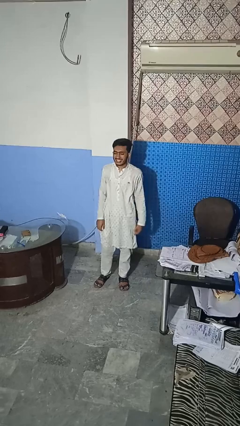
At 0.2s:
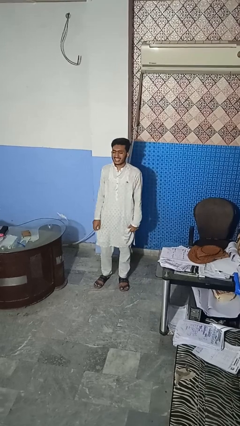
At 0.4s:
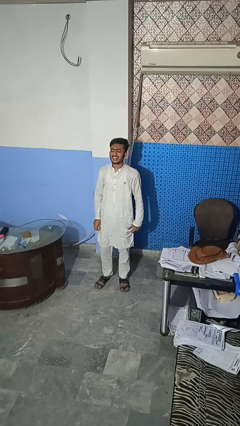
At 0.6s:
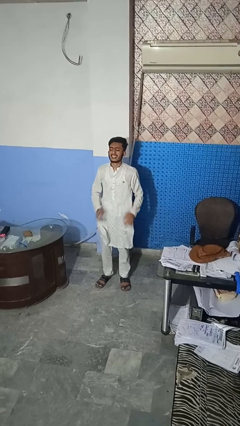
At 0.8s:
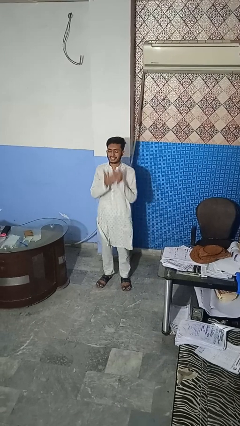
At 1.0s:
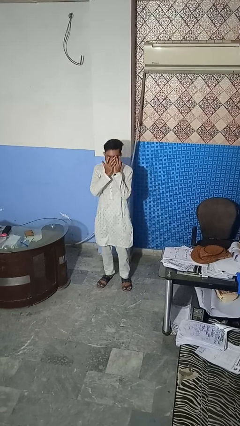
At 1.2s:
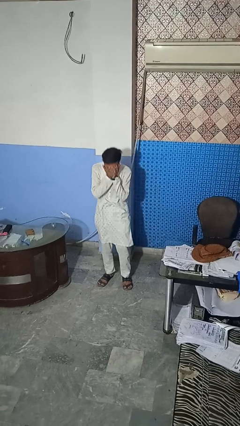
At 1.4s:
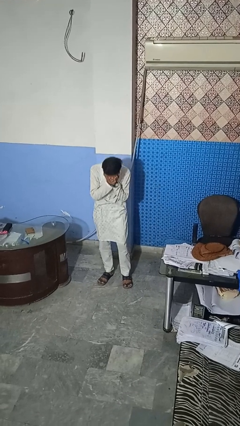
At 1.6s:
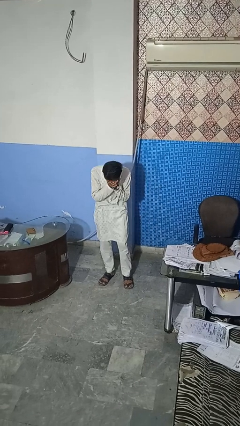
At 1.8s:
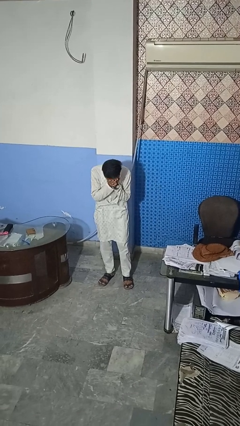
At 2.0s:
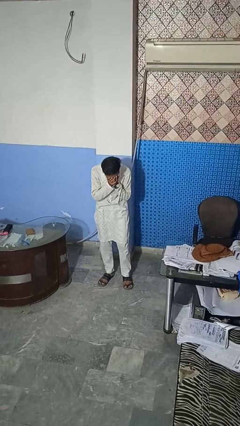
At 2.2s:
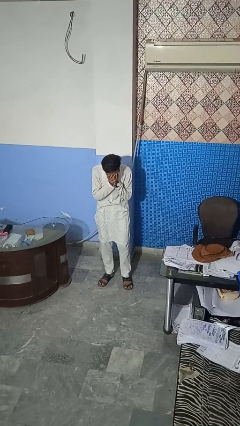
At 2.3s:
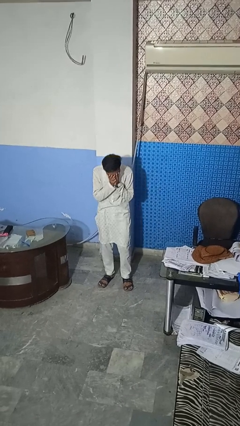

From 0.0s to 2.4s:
person sneezes into hand

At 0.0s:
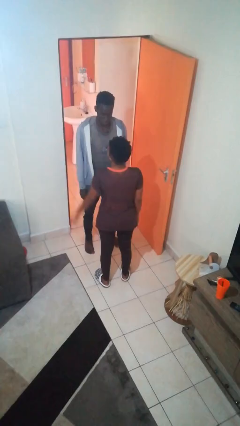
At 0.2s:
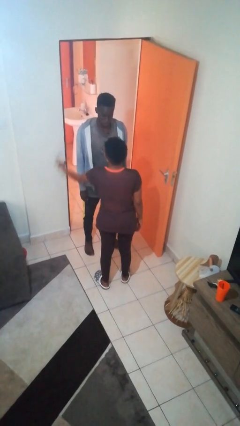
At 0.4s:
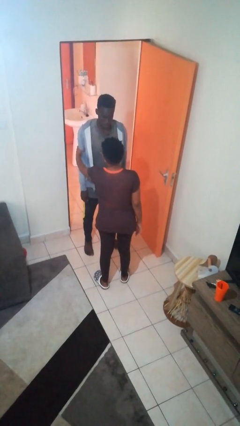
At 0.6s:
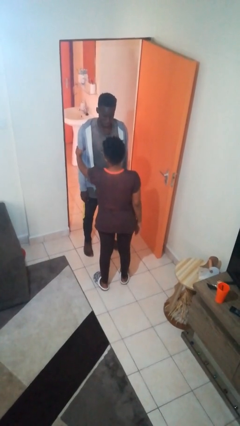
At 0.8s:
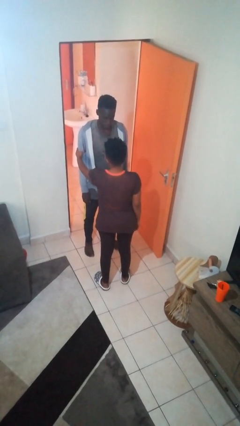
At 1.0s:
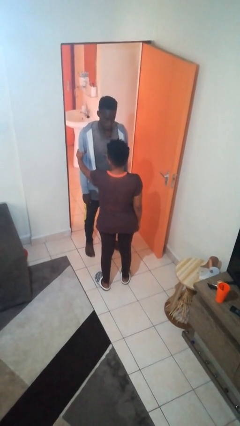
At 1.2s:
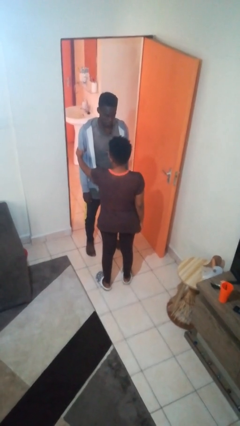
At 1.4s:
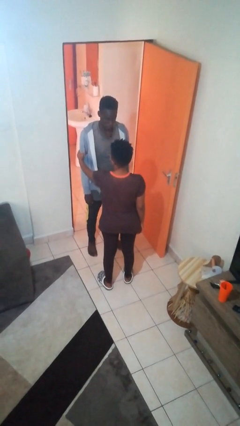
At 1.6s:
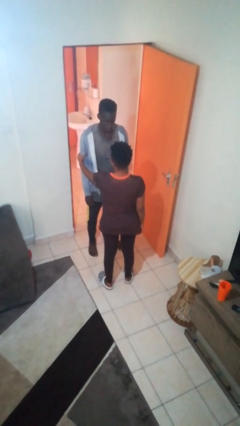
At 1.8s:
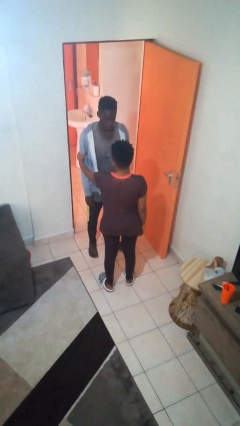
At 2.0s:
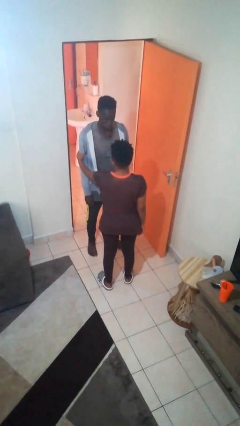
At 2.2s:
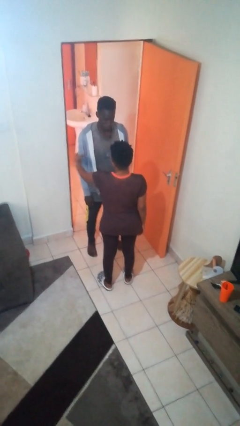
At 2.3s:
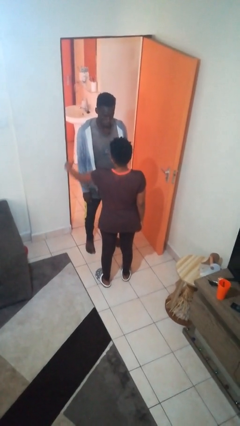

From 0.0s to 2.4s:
person grabs person by bicep

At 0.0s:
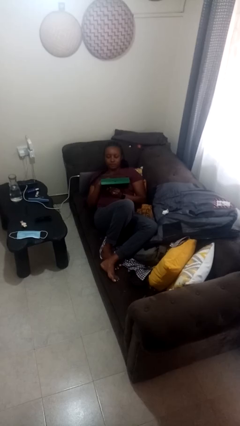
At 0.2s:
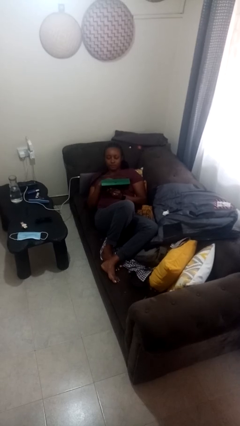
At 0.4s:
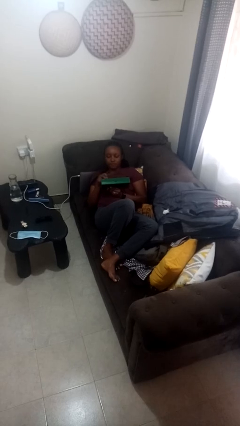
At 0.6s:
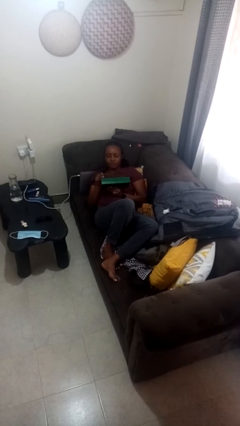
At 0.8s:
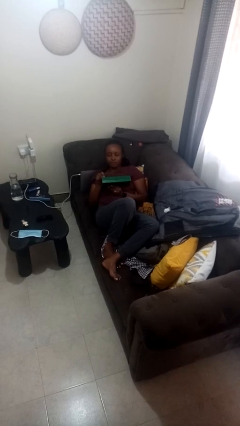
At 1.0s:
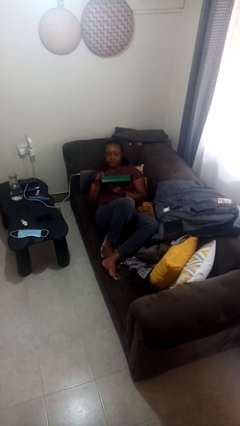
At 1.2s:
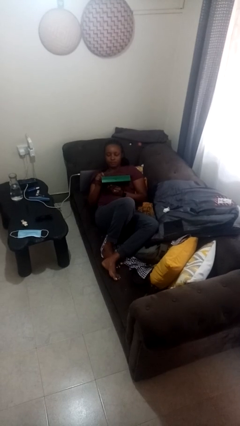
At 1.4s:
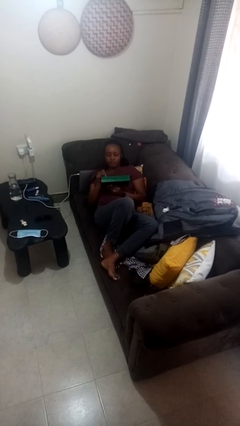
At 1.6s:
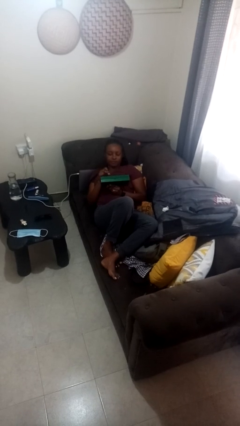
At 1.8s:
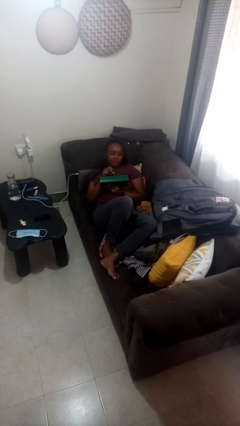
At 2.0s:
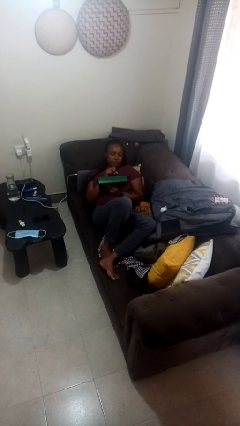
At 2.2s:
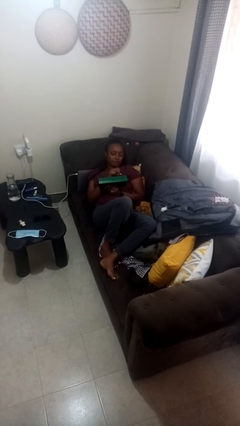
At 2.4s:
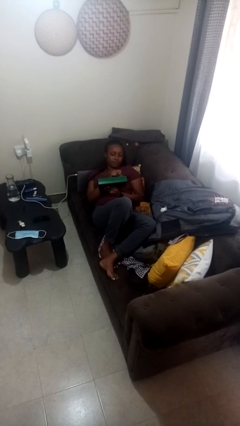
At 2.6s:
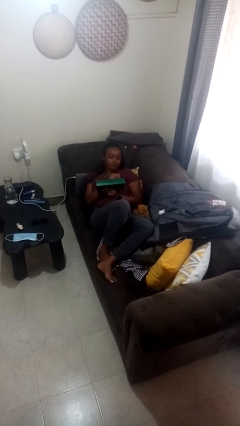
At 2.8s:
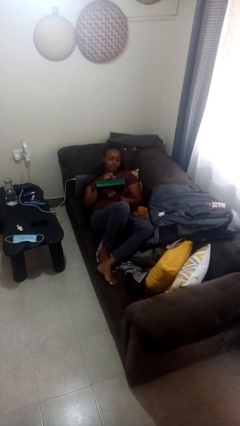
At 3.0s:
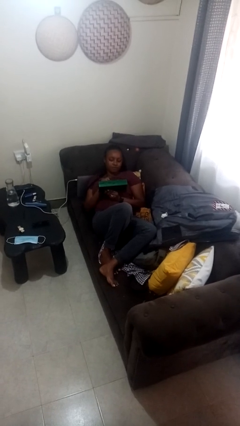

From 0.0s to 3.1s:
person interacts with handheld game

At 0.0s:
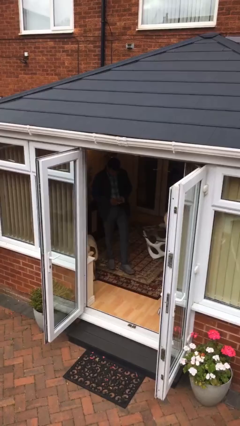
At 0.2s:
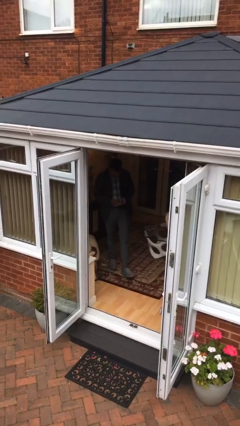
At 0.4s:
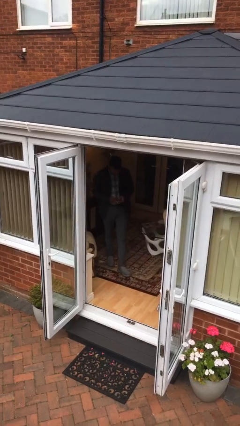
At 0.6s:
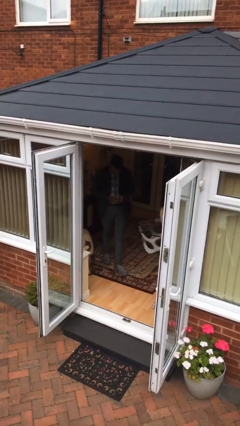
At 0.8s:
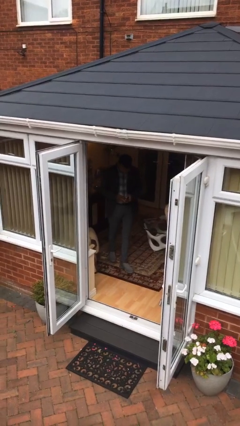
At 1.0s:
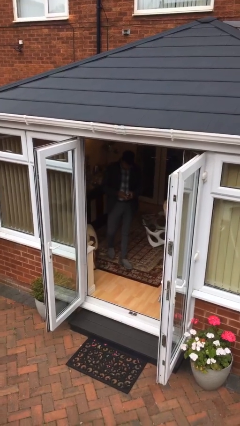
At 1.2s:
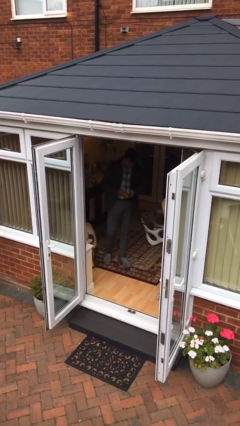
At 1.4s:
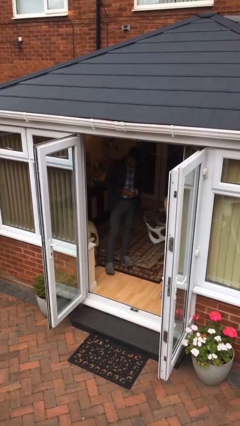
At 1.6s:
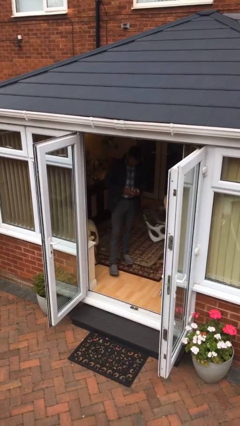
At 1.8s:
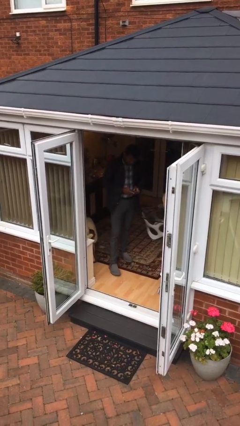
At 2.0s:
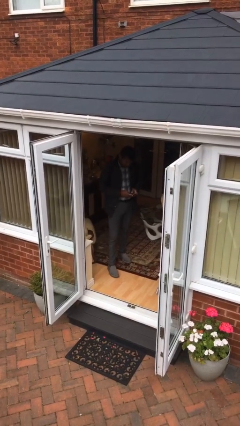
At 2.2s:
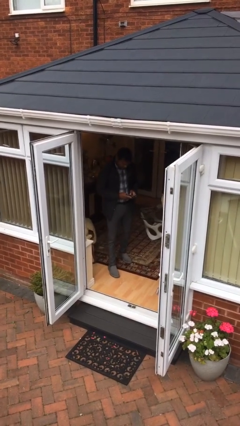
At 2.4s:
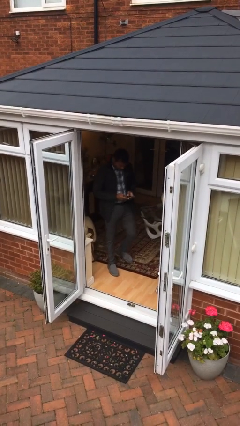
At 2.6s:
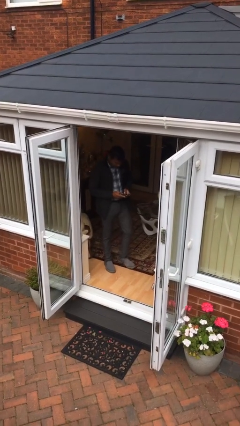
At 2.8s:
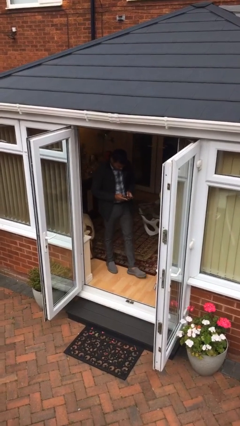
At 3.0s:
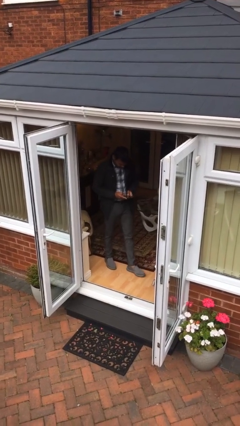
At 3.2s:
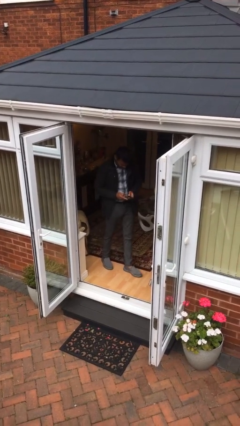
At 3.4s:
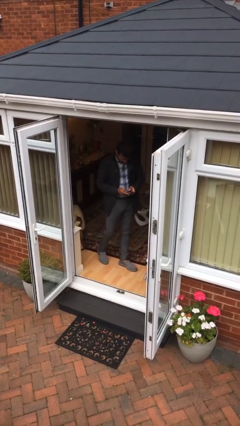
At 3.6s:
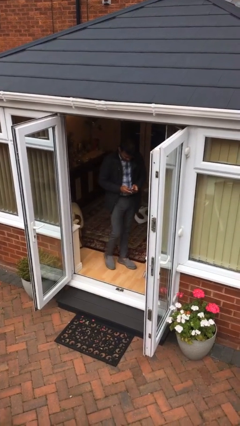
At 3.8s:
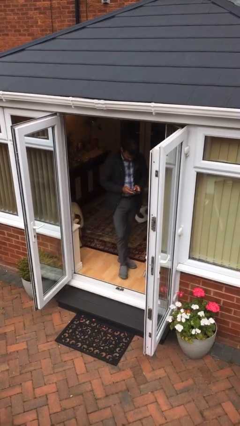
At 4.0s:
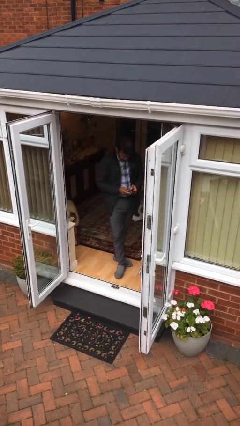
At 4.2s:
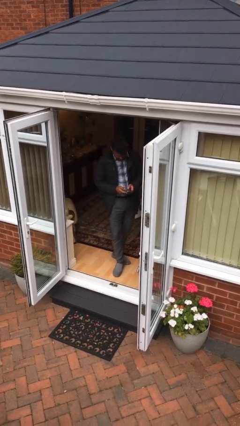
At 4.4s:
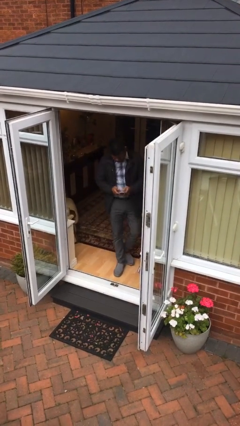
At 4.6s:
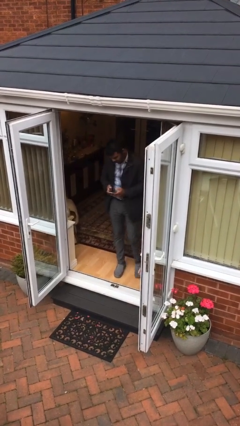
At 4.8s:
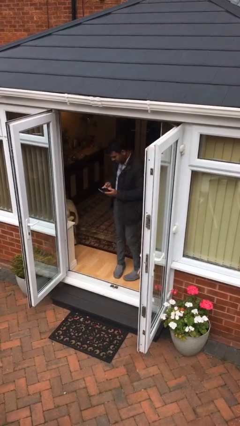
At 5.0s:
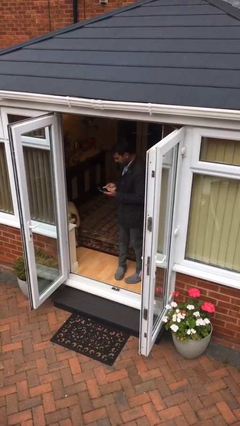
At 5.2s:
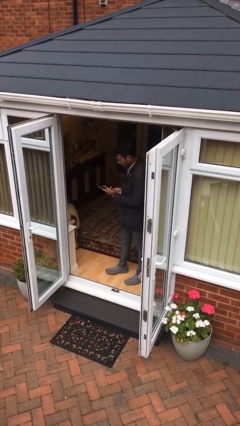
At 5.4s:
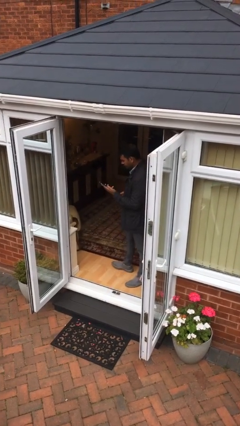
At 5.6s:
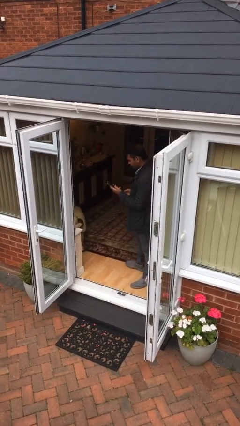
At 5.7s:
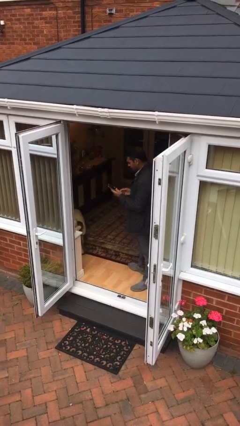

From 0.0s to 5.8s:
person texts on phone

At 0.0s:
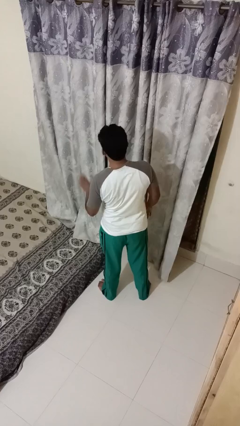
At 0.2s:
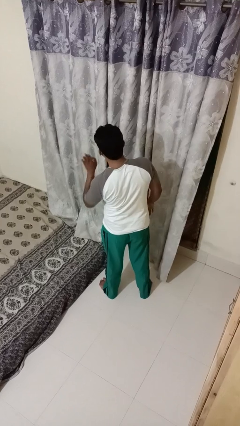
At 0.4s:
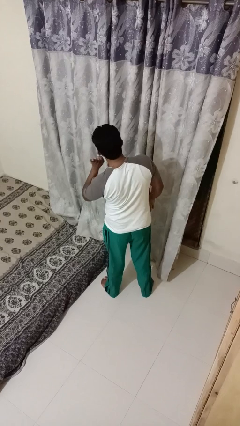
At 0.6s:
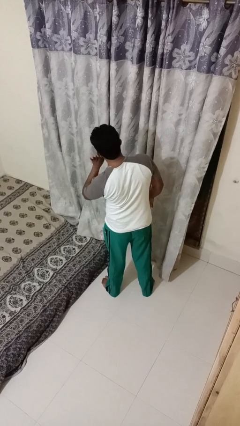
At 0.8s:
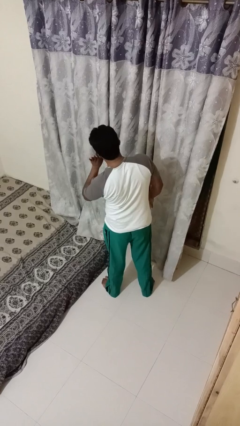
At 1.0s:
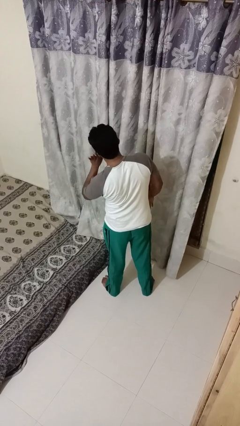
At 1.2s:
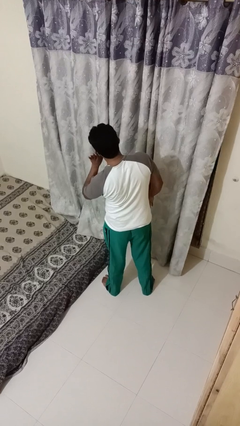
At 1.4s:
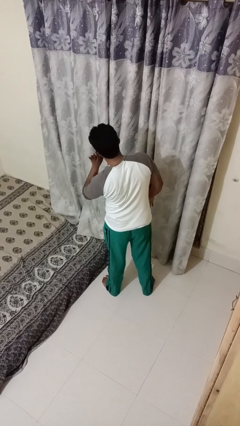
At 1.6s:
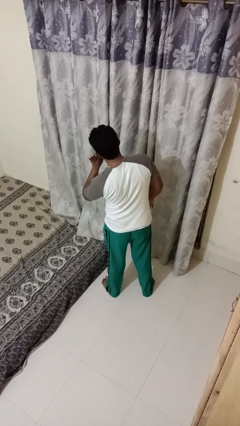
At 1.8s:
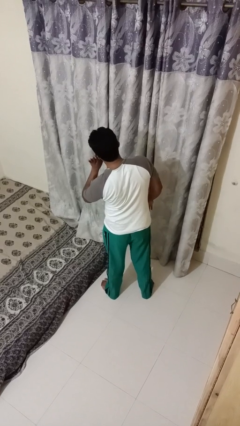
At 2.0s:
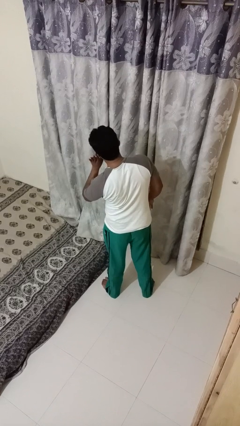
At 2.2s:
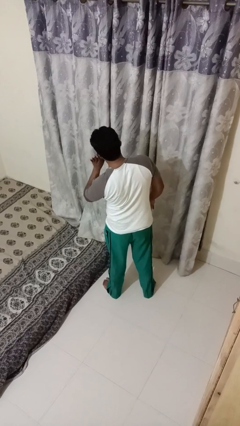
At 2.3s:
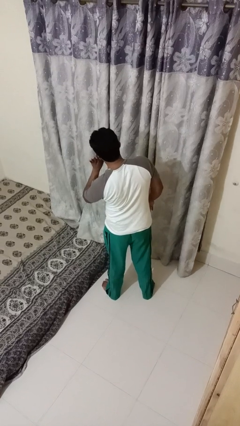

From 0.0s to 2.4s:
person gestures listen closely

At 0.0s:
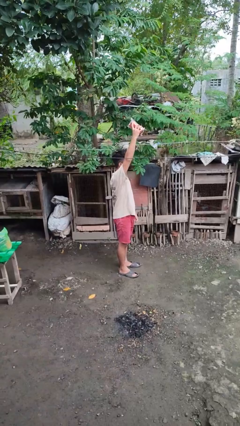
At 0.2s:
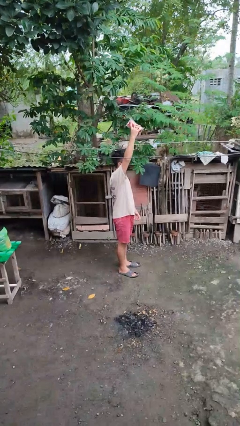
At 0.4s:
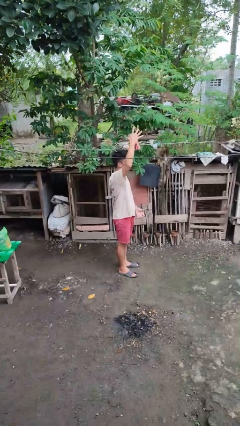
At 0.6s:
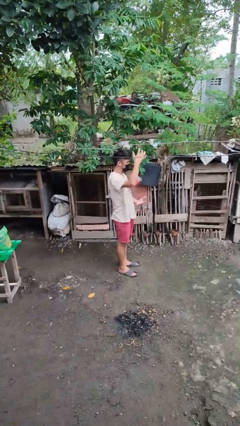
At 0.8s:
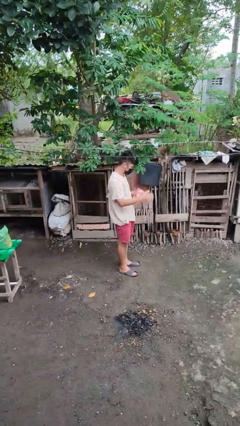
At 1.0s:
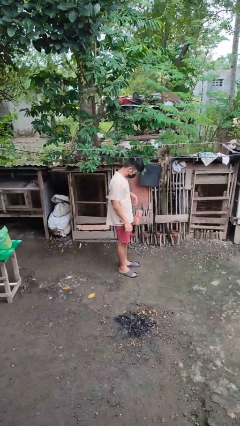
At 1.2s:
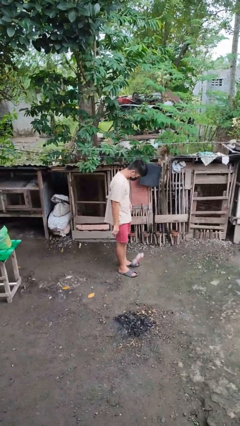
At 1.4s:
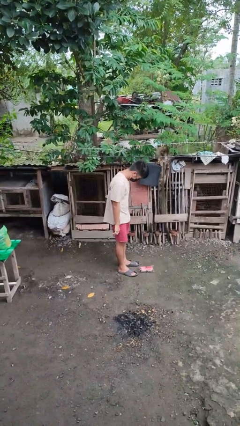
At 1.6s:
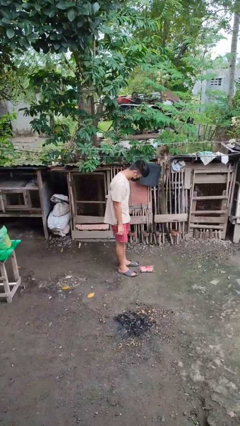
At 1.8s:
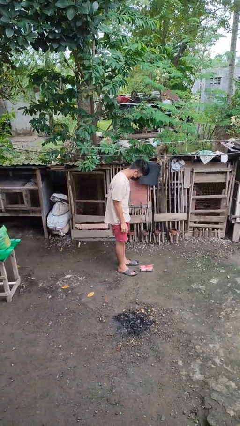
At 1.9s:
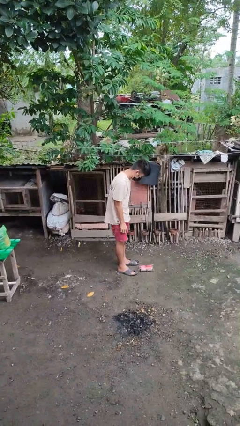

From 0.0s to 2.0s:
person drops object
